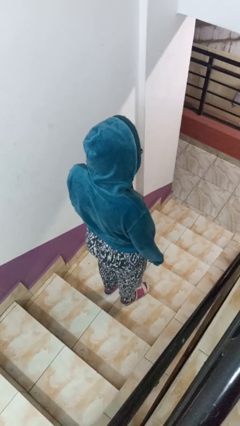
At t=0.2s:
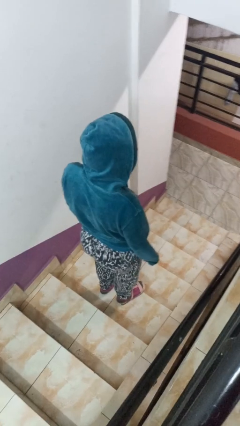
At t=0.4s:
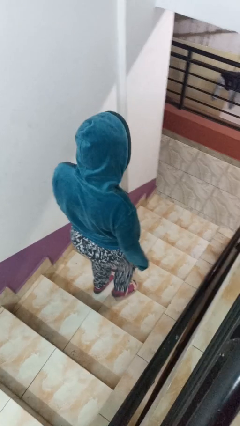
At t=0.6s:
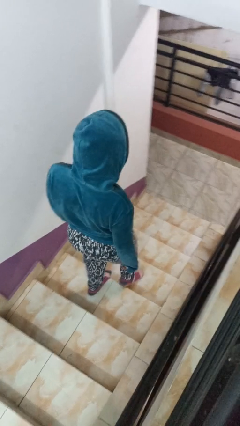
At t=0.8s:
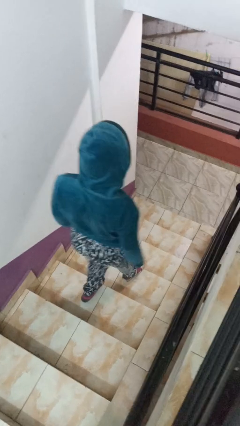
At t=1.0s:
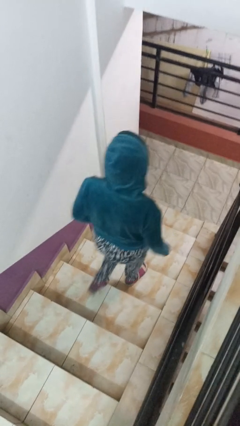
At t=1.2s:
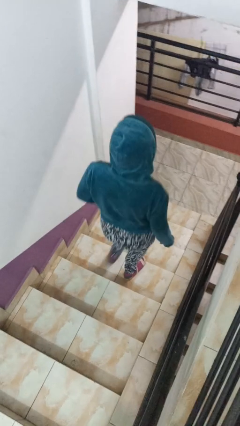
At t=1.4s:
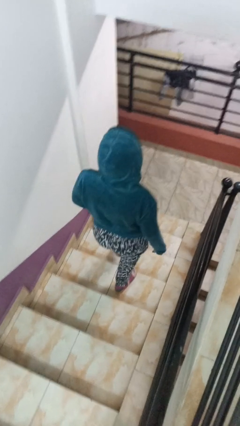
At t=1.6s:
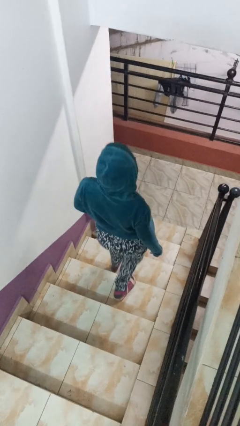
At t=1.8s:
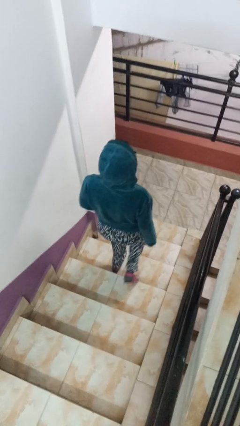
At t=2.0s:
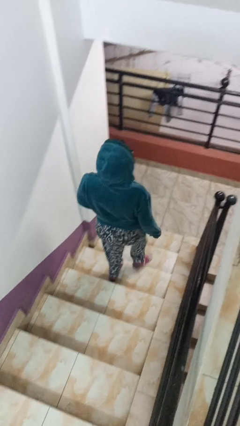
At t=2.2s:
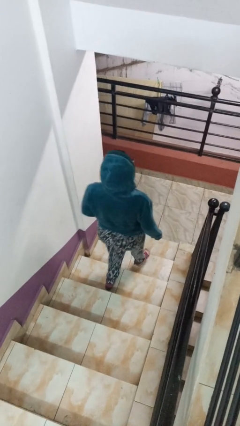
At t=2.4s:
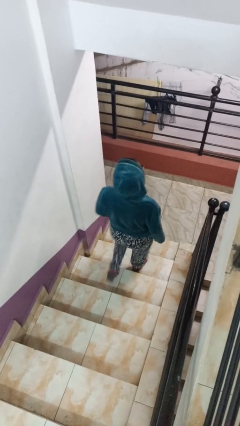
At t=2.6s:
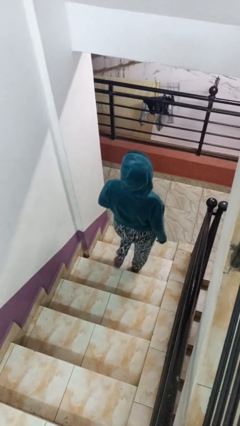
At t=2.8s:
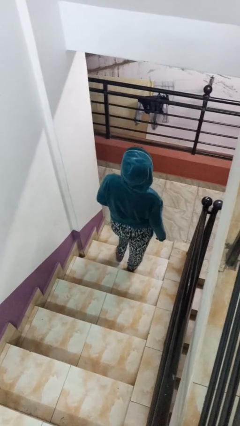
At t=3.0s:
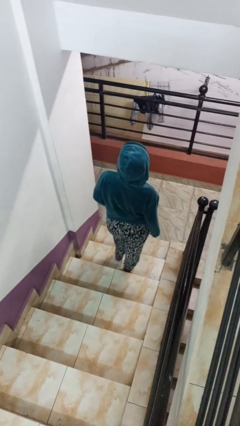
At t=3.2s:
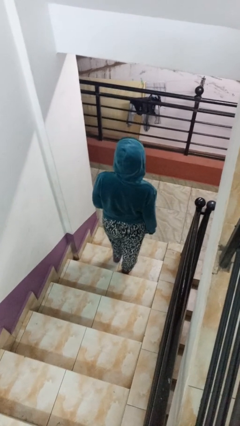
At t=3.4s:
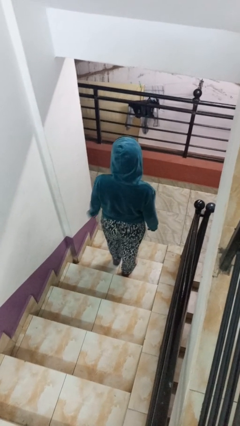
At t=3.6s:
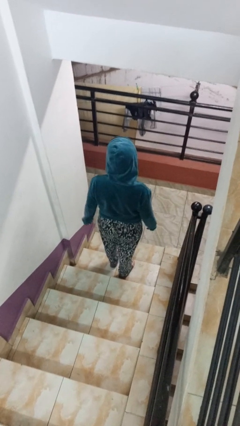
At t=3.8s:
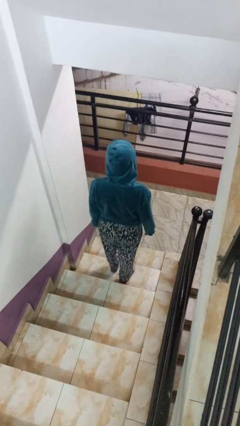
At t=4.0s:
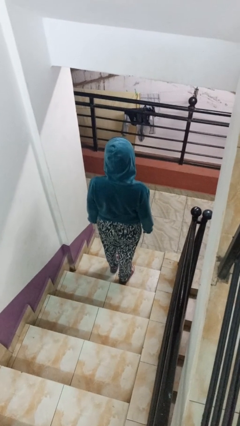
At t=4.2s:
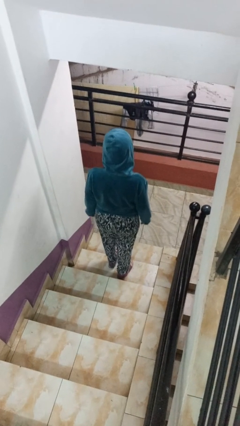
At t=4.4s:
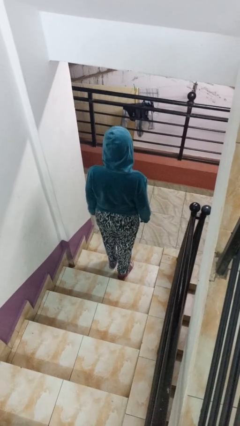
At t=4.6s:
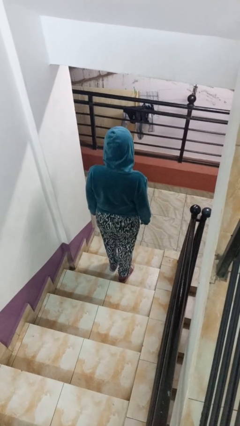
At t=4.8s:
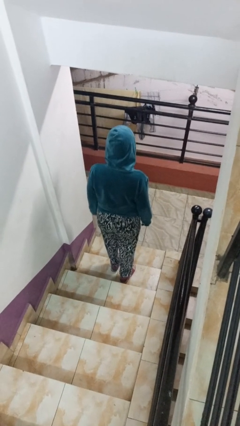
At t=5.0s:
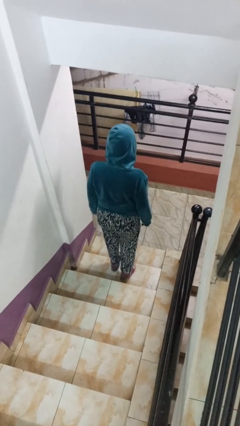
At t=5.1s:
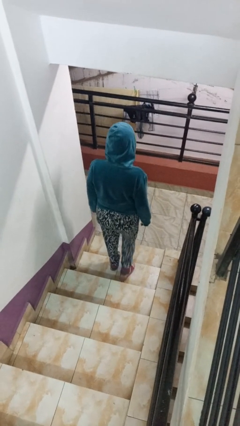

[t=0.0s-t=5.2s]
person climbs down stairs

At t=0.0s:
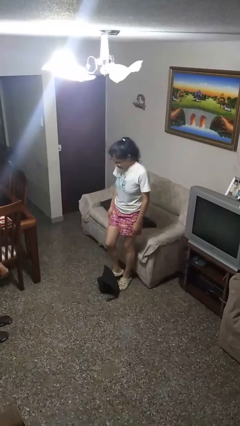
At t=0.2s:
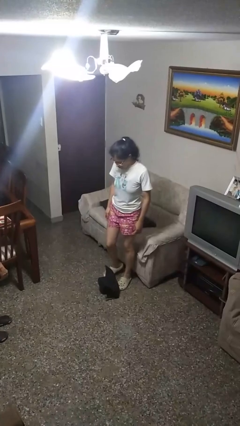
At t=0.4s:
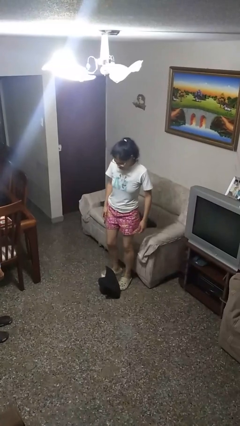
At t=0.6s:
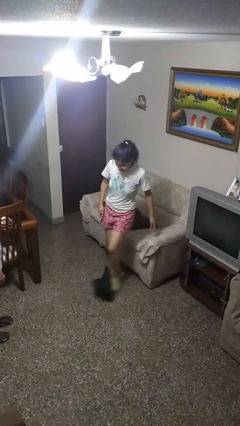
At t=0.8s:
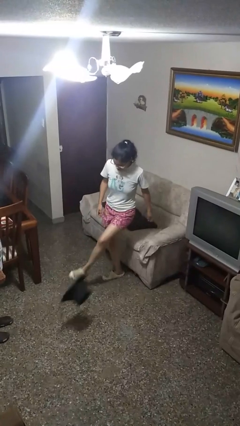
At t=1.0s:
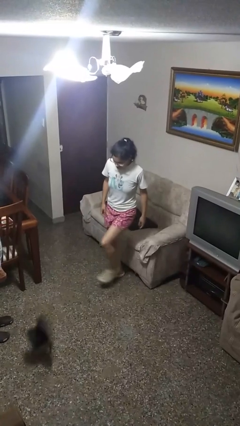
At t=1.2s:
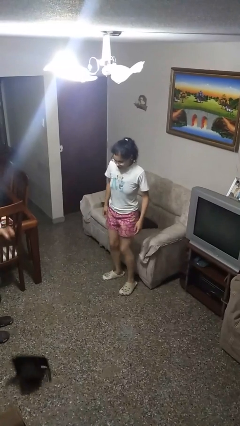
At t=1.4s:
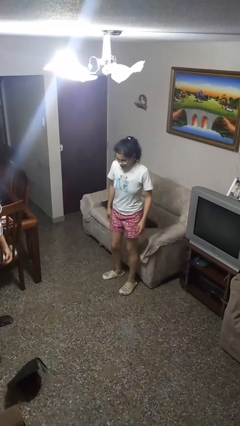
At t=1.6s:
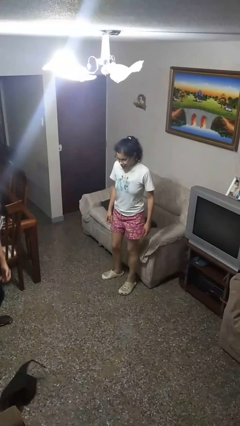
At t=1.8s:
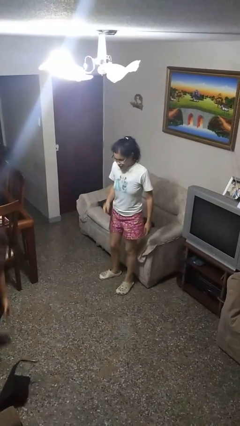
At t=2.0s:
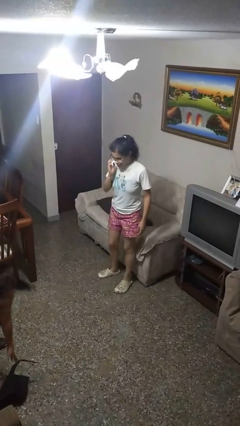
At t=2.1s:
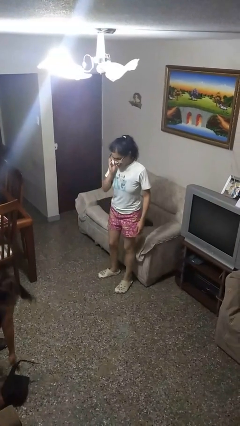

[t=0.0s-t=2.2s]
person kicks object to person

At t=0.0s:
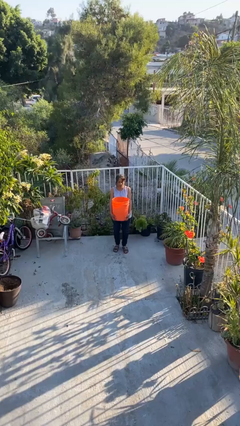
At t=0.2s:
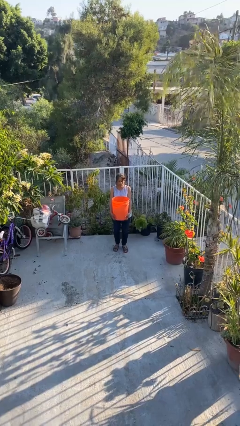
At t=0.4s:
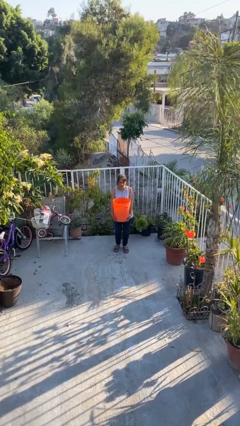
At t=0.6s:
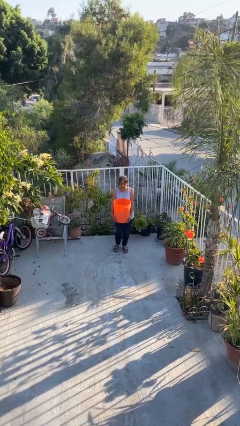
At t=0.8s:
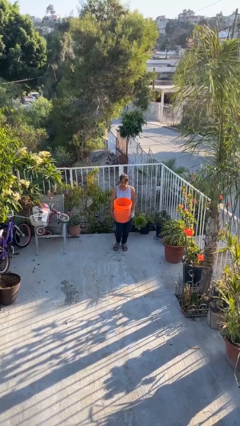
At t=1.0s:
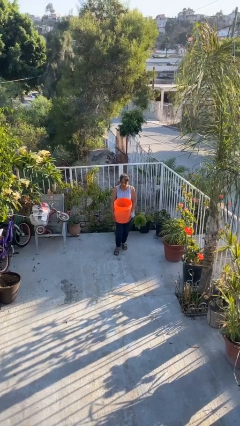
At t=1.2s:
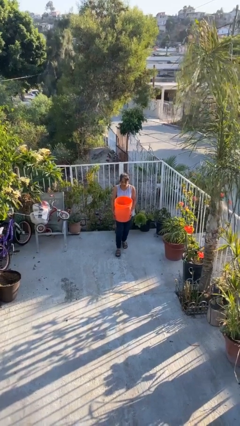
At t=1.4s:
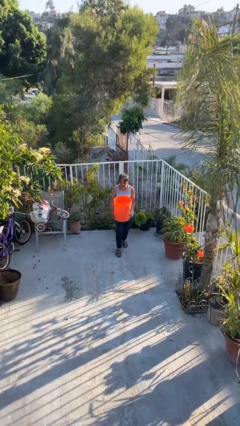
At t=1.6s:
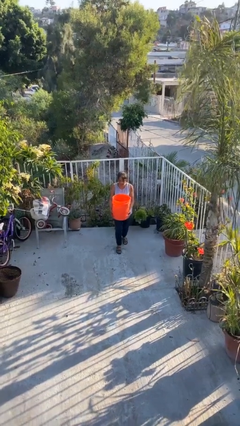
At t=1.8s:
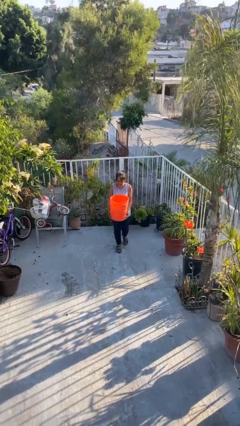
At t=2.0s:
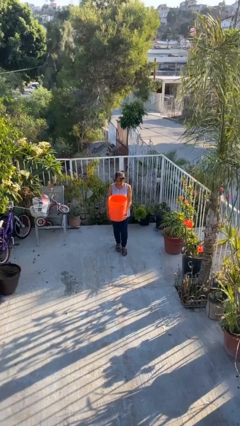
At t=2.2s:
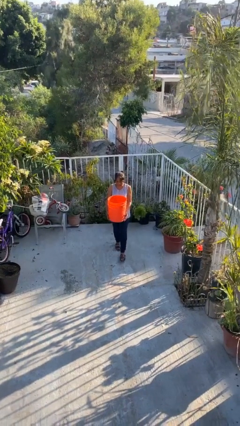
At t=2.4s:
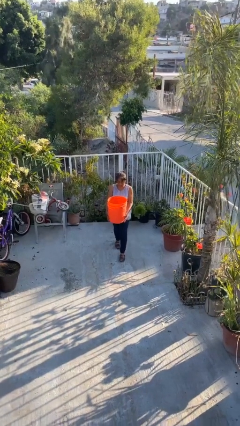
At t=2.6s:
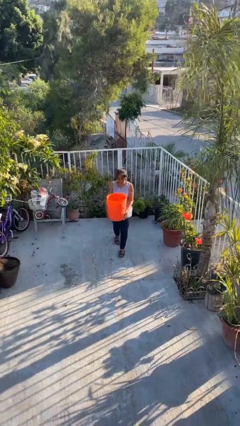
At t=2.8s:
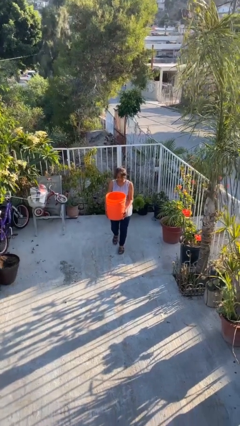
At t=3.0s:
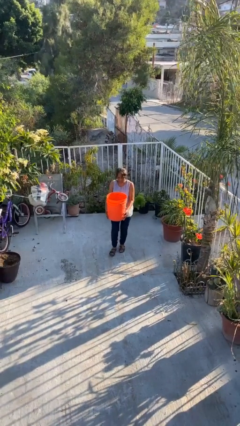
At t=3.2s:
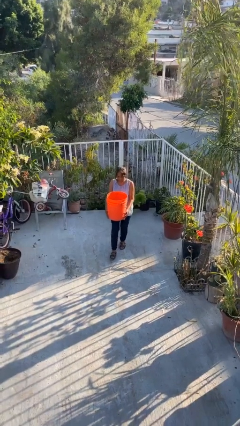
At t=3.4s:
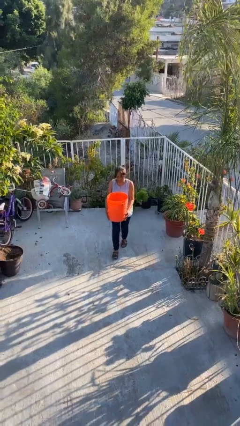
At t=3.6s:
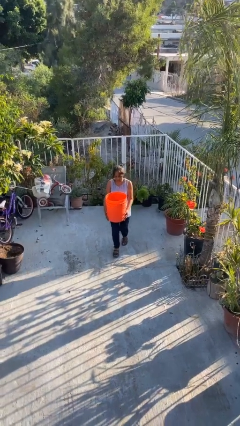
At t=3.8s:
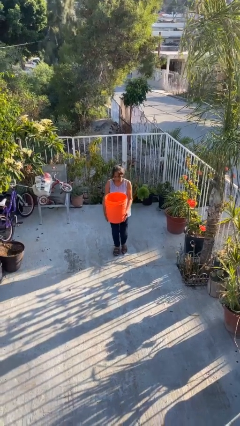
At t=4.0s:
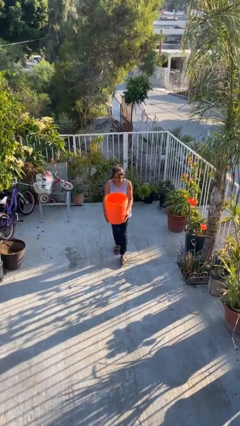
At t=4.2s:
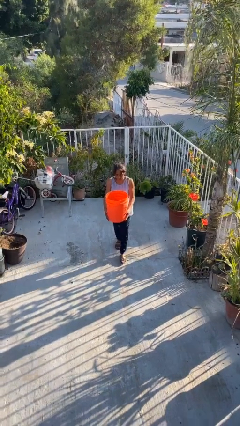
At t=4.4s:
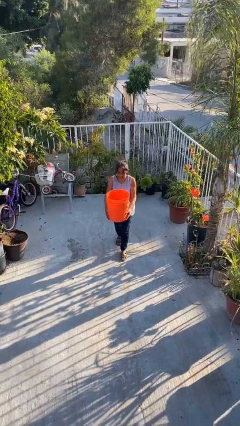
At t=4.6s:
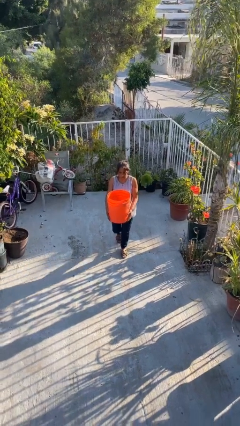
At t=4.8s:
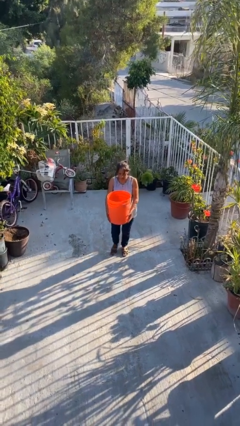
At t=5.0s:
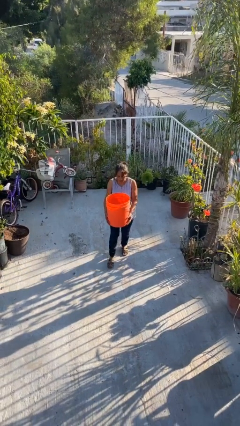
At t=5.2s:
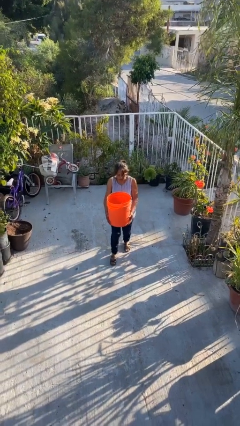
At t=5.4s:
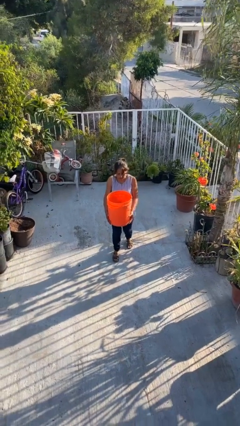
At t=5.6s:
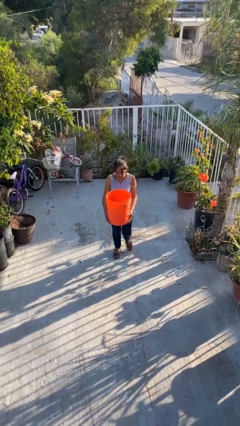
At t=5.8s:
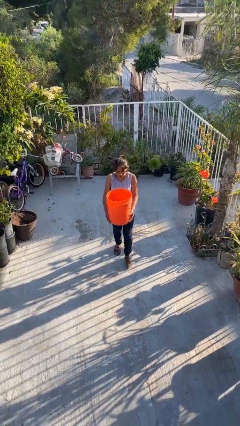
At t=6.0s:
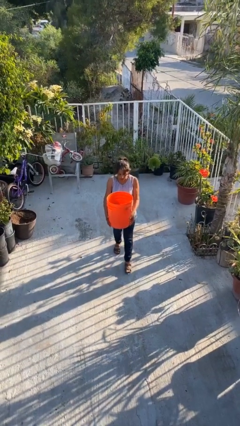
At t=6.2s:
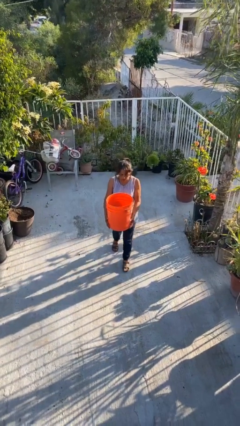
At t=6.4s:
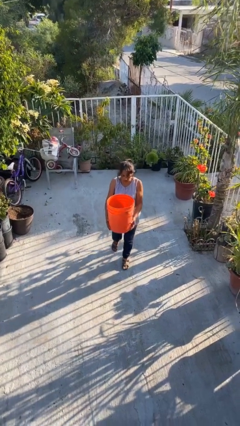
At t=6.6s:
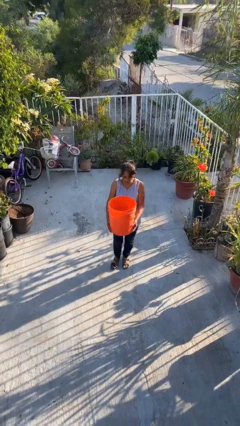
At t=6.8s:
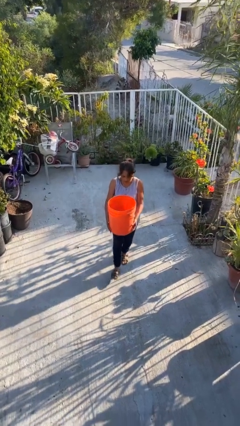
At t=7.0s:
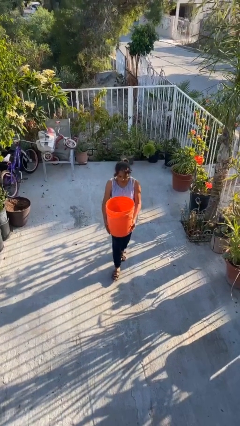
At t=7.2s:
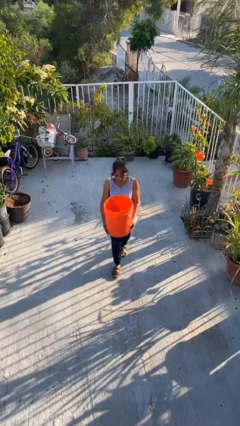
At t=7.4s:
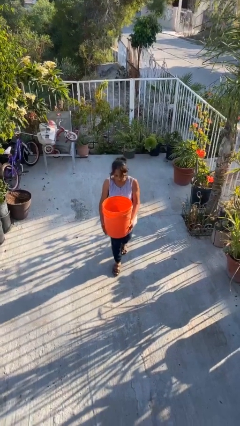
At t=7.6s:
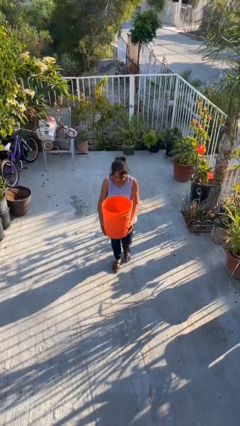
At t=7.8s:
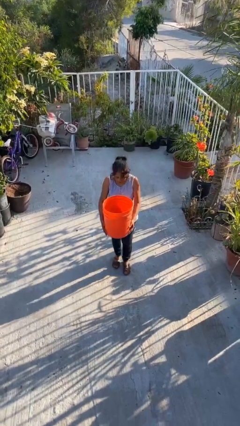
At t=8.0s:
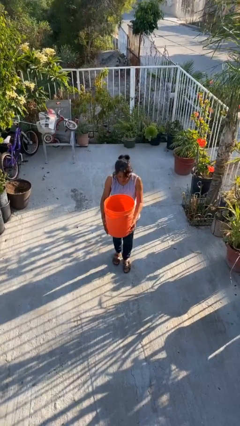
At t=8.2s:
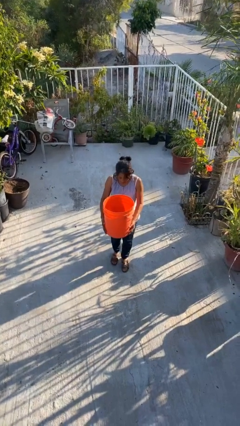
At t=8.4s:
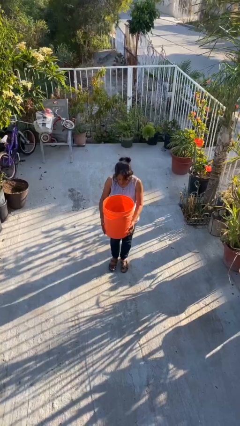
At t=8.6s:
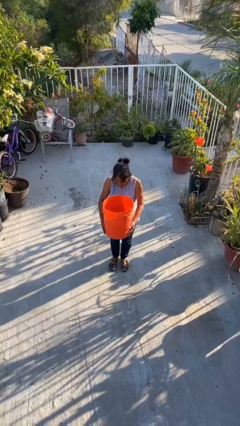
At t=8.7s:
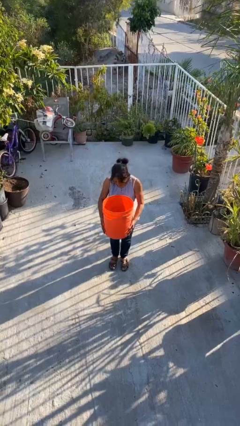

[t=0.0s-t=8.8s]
person carries heavy object

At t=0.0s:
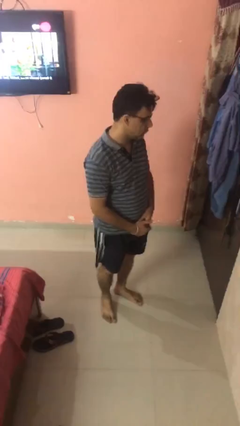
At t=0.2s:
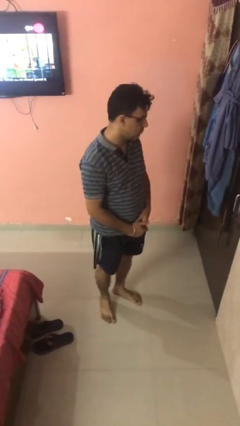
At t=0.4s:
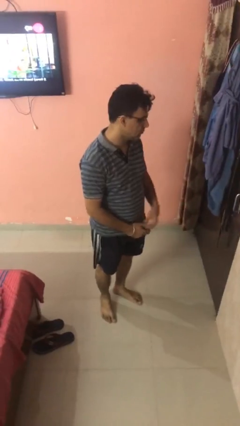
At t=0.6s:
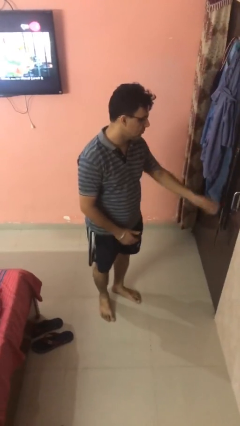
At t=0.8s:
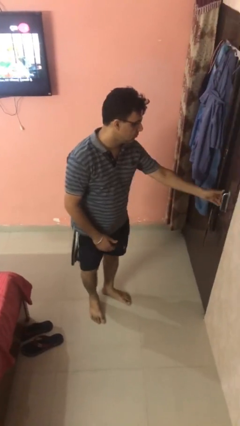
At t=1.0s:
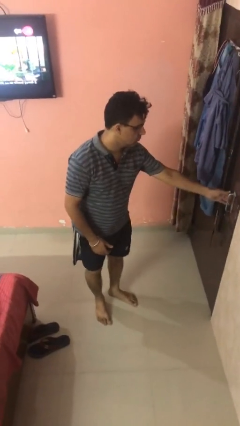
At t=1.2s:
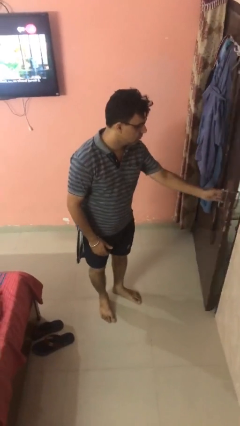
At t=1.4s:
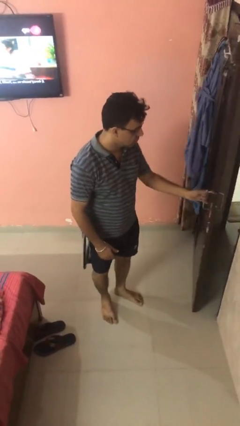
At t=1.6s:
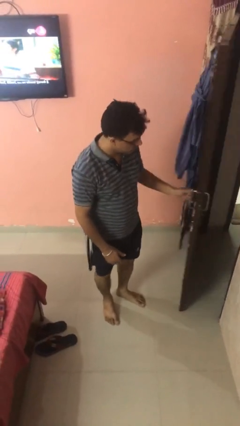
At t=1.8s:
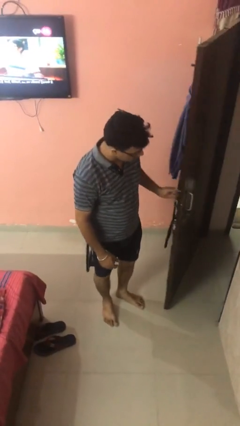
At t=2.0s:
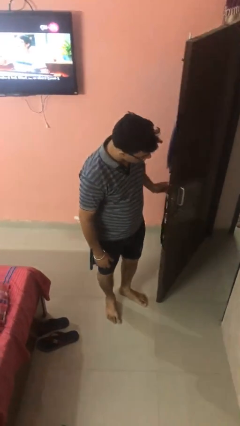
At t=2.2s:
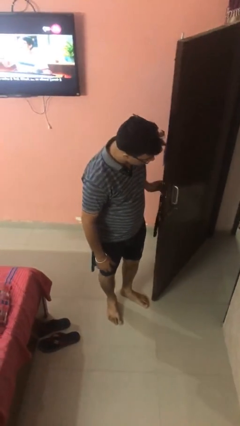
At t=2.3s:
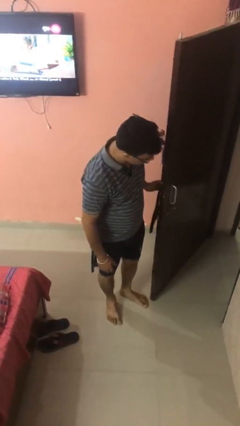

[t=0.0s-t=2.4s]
person opens facility door
